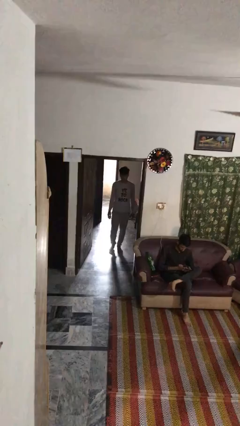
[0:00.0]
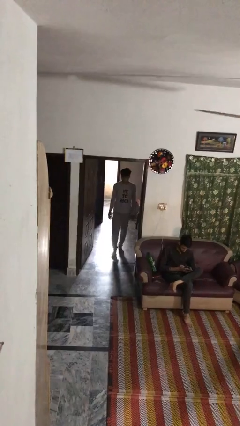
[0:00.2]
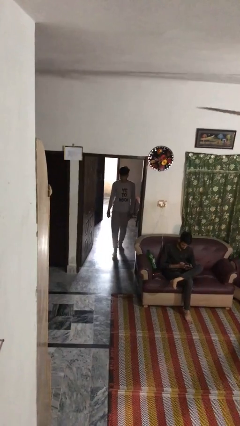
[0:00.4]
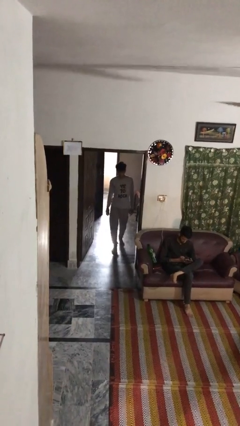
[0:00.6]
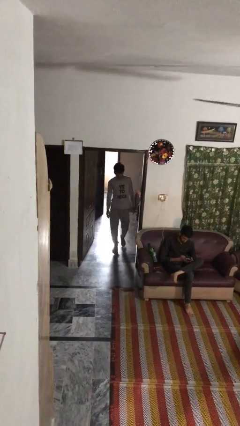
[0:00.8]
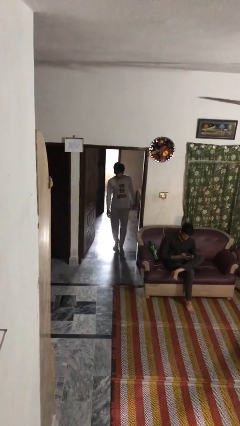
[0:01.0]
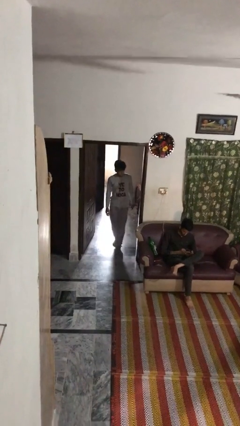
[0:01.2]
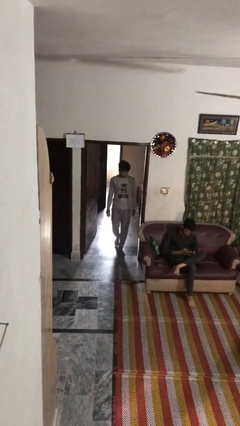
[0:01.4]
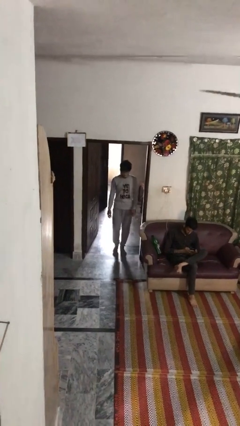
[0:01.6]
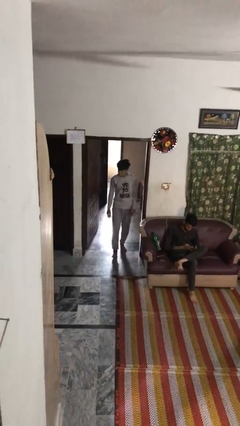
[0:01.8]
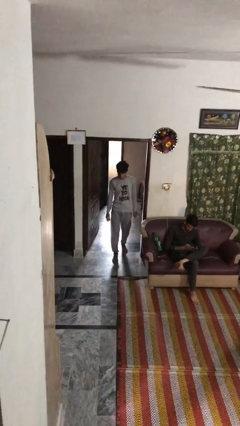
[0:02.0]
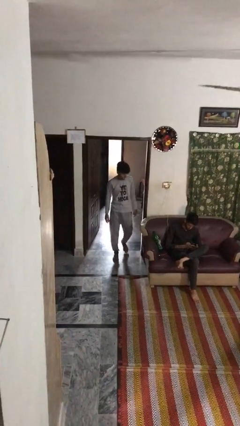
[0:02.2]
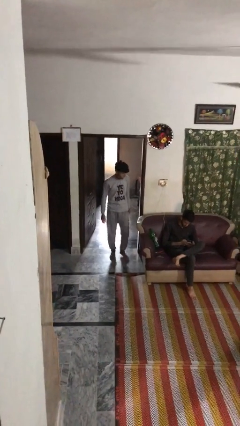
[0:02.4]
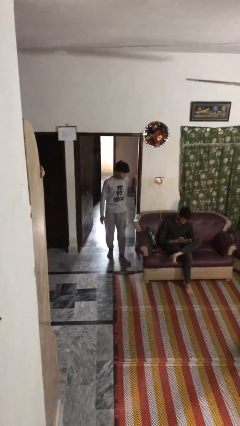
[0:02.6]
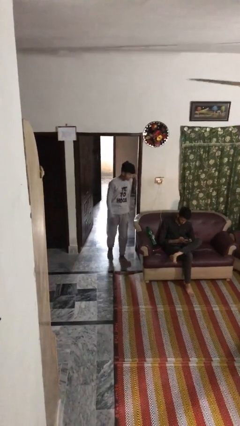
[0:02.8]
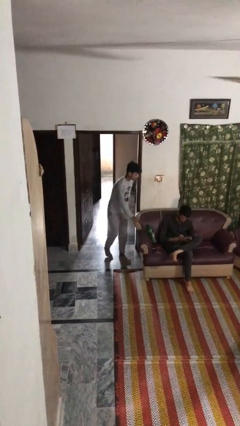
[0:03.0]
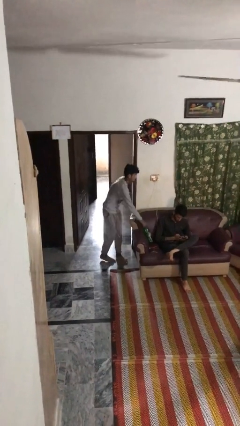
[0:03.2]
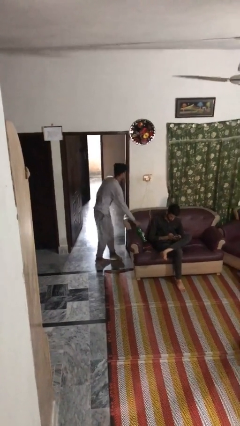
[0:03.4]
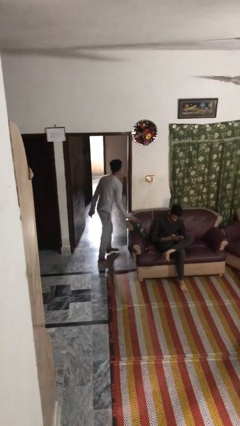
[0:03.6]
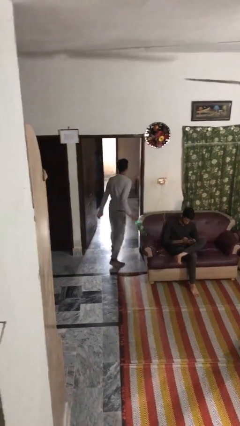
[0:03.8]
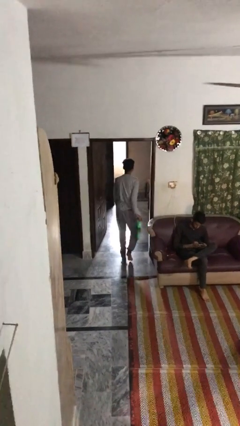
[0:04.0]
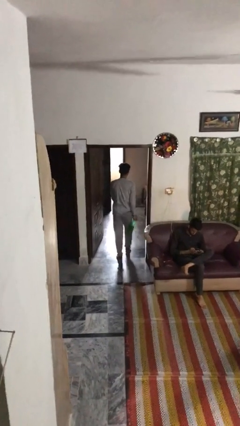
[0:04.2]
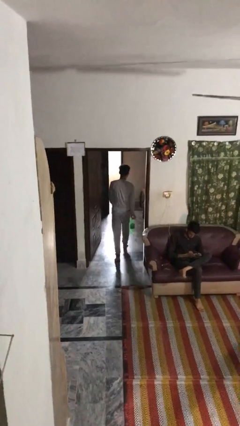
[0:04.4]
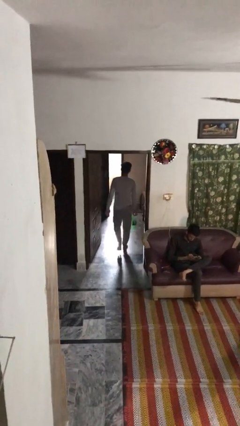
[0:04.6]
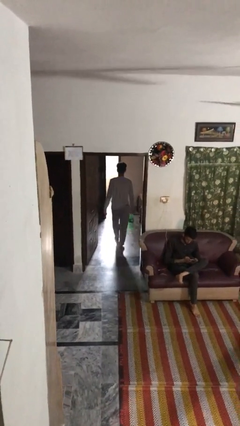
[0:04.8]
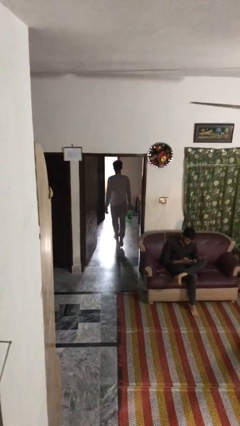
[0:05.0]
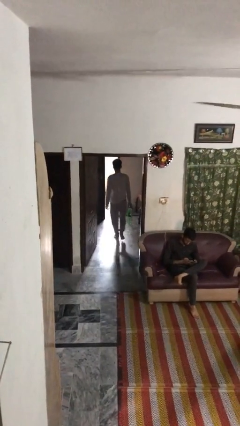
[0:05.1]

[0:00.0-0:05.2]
person steals object from person

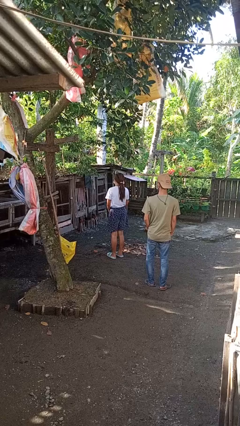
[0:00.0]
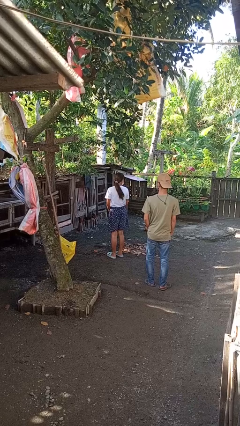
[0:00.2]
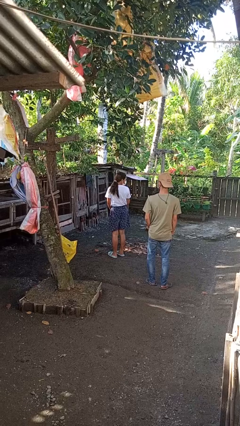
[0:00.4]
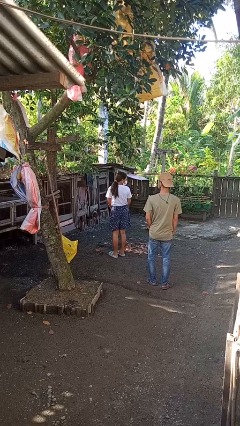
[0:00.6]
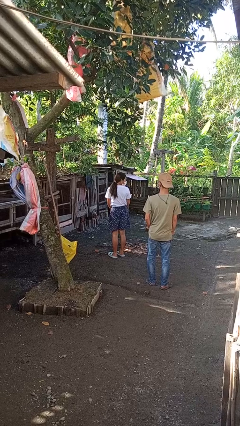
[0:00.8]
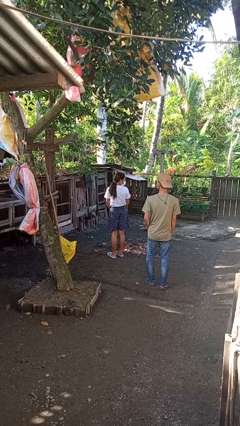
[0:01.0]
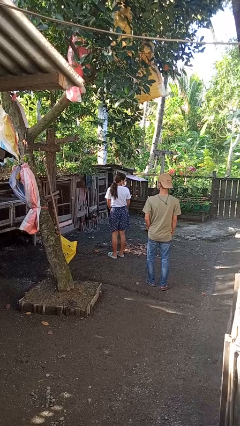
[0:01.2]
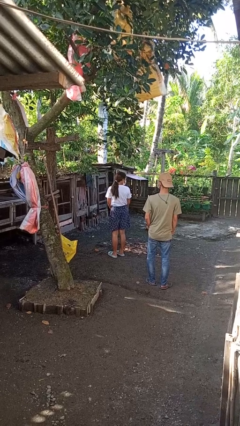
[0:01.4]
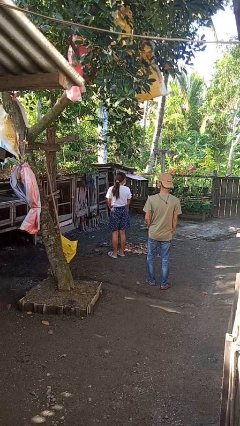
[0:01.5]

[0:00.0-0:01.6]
person looks over shoulder

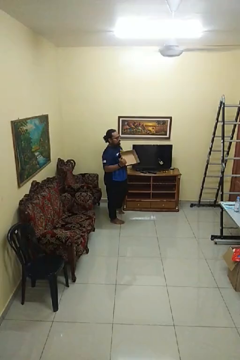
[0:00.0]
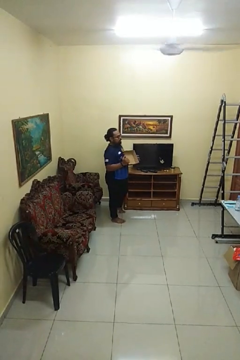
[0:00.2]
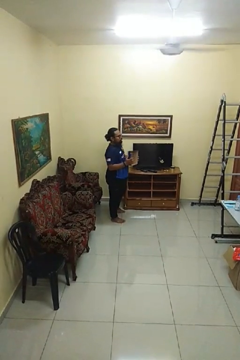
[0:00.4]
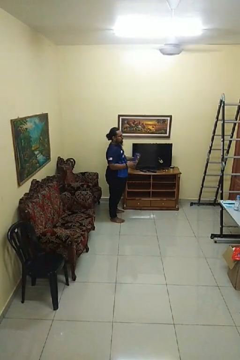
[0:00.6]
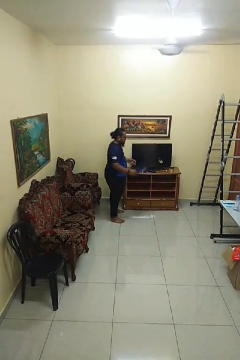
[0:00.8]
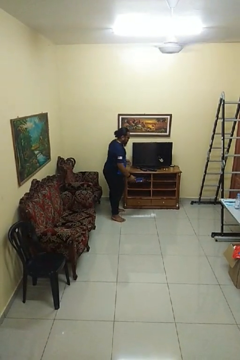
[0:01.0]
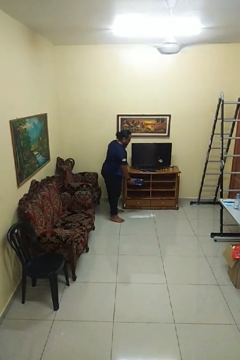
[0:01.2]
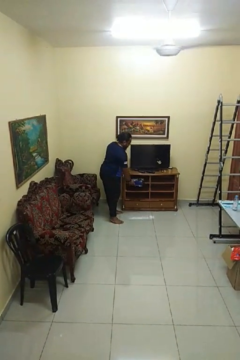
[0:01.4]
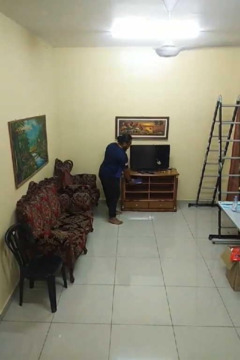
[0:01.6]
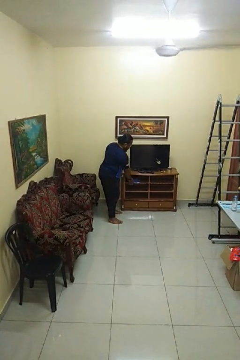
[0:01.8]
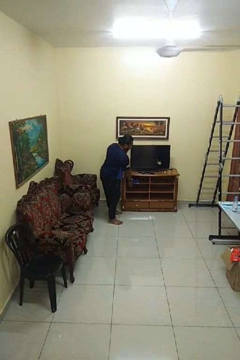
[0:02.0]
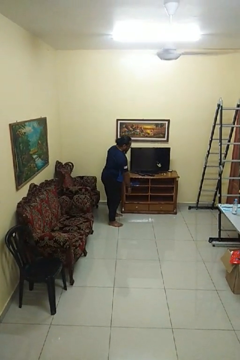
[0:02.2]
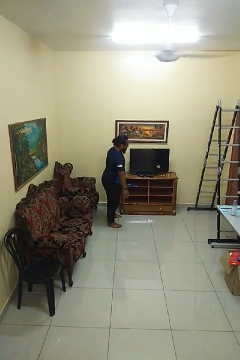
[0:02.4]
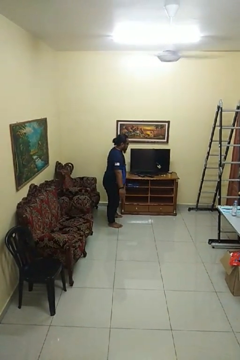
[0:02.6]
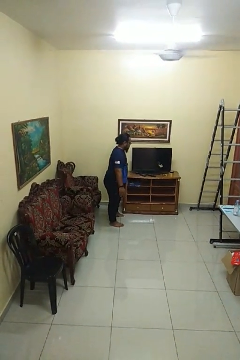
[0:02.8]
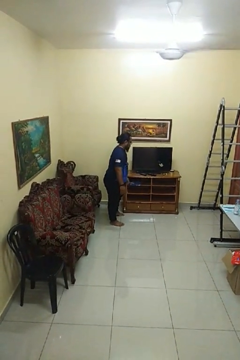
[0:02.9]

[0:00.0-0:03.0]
person puts down object into cabinet

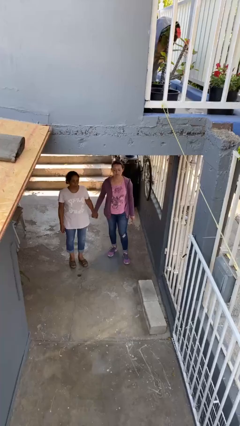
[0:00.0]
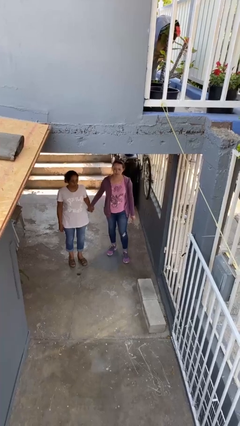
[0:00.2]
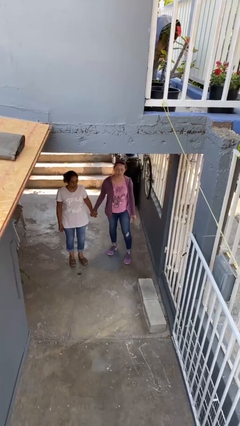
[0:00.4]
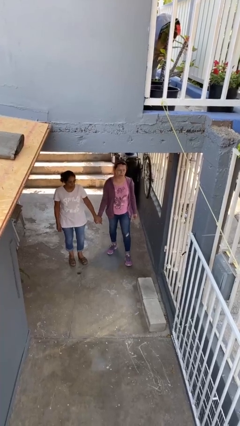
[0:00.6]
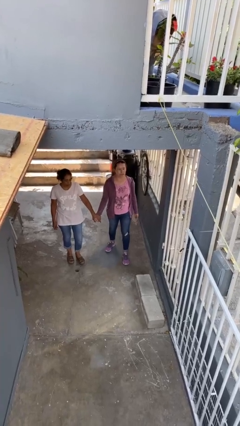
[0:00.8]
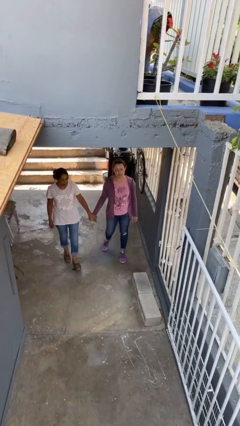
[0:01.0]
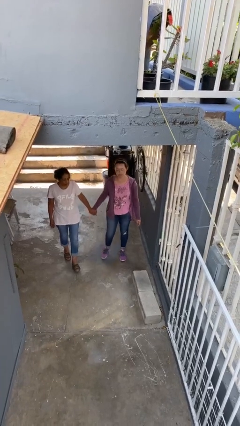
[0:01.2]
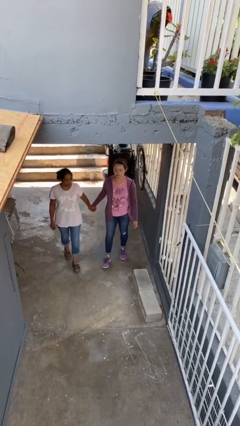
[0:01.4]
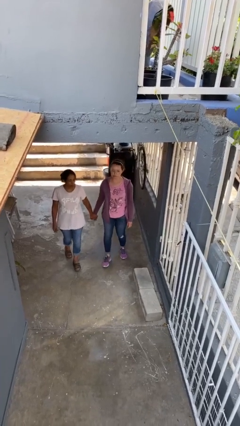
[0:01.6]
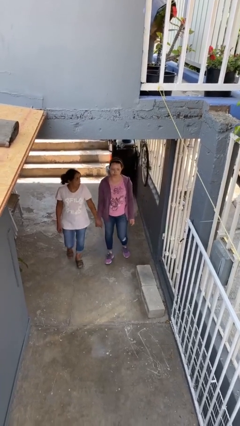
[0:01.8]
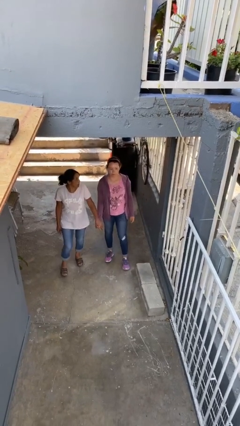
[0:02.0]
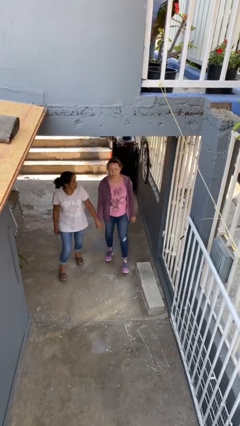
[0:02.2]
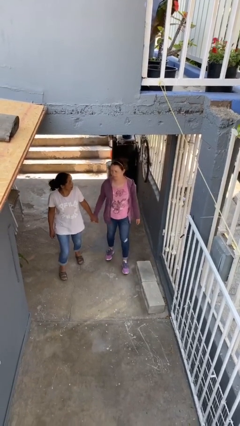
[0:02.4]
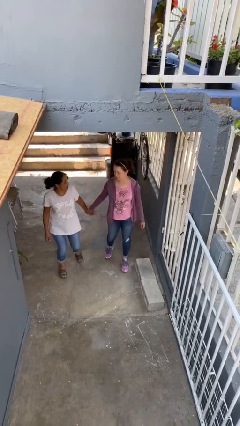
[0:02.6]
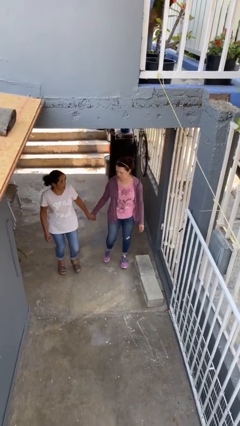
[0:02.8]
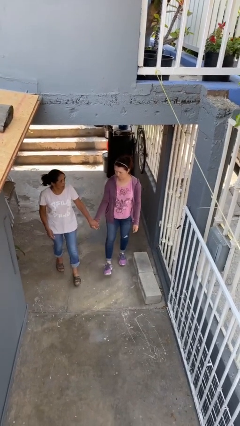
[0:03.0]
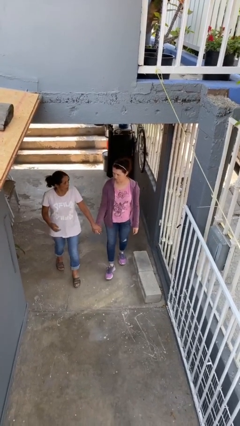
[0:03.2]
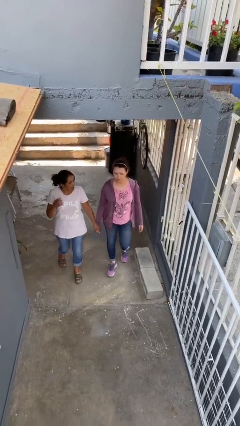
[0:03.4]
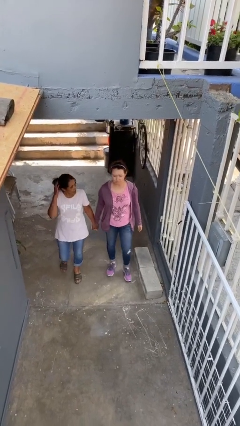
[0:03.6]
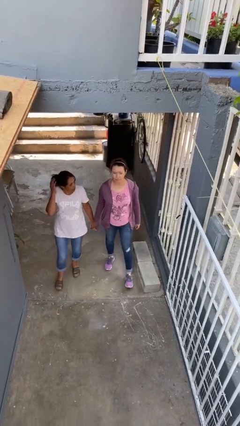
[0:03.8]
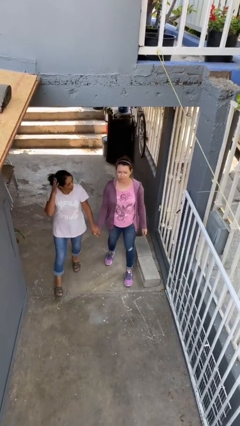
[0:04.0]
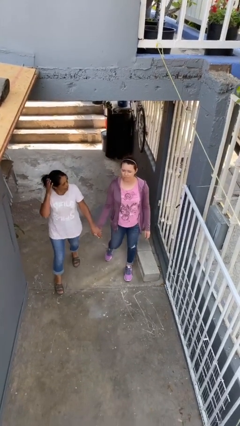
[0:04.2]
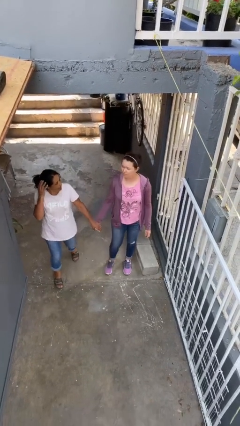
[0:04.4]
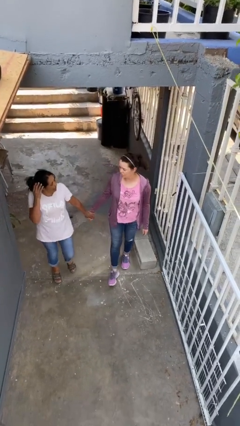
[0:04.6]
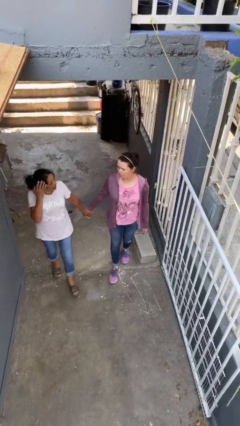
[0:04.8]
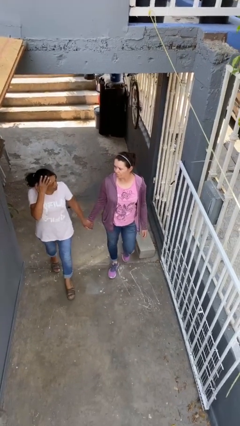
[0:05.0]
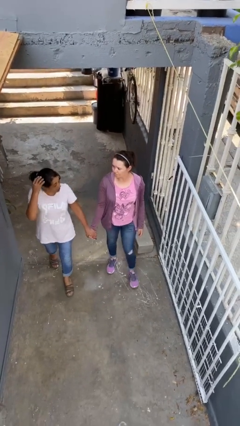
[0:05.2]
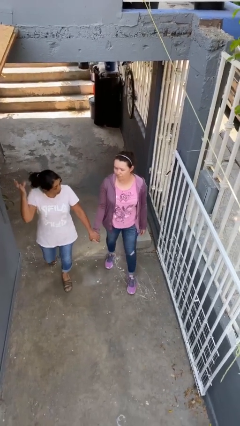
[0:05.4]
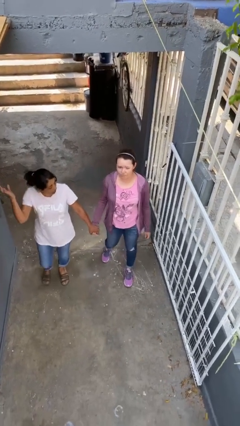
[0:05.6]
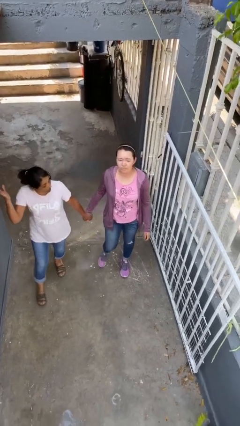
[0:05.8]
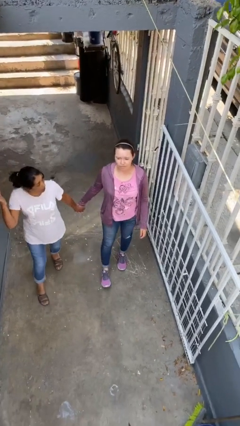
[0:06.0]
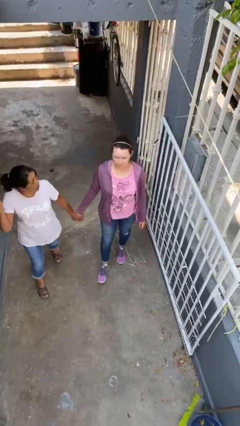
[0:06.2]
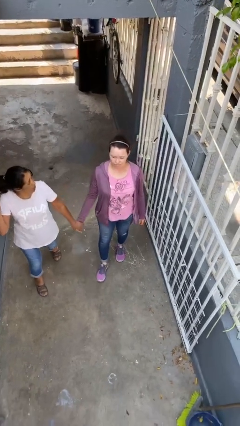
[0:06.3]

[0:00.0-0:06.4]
person holds hand

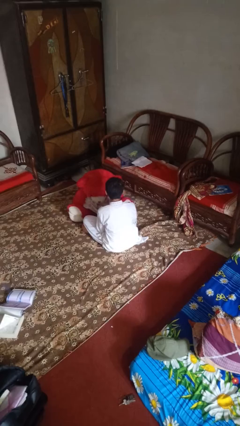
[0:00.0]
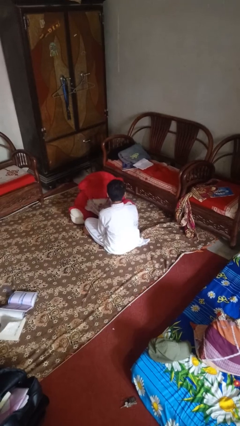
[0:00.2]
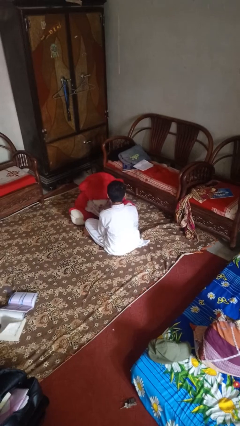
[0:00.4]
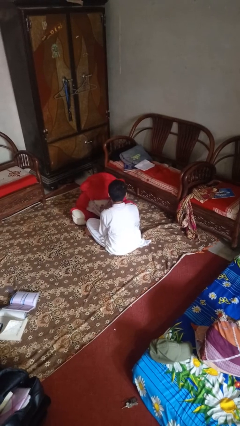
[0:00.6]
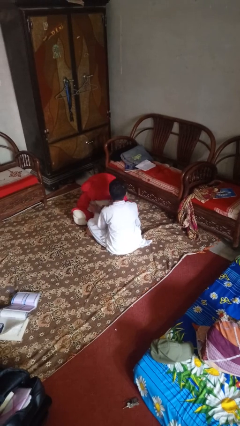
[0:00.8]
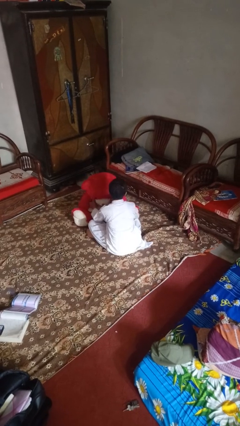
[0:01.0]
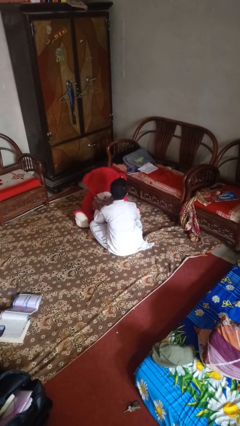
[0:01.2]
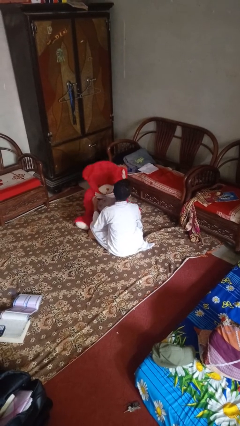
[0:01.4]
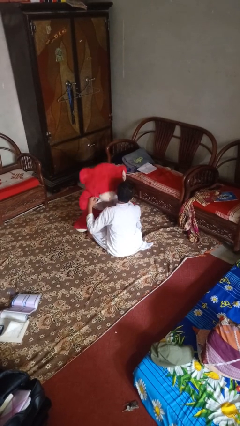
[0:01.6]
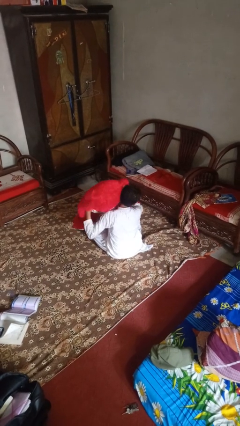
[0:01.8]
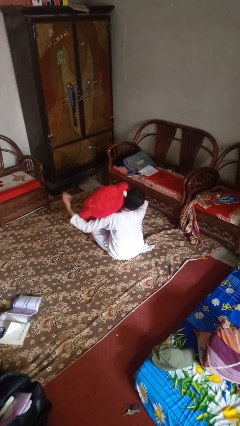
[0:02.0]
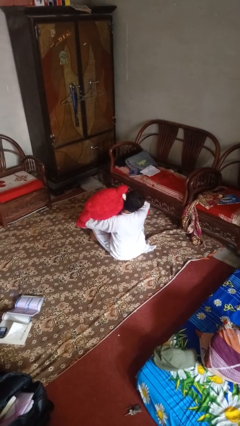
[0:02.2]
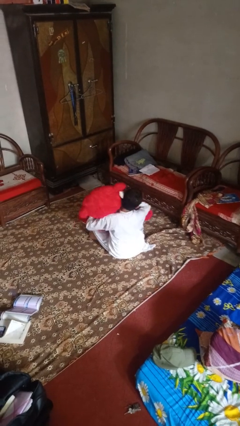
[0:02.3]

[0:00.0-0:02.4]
person hugs stuffed animal
